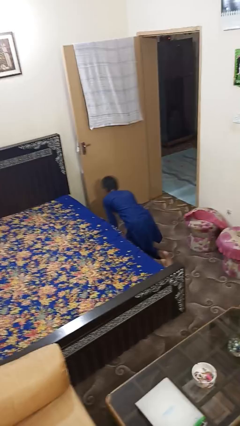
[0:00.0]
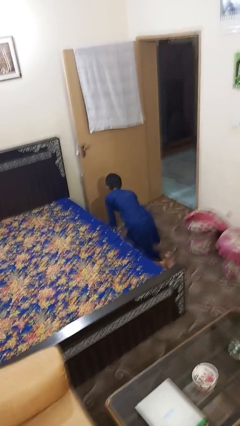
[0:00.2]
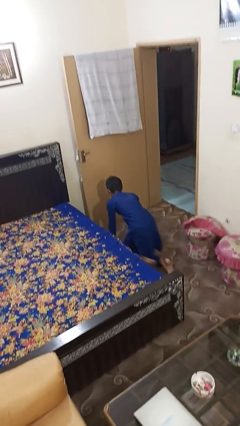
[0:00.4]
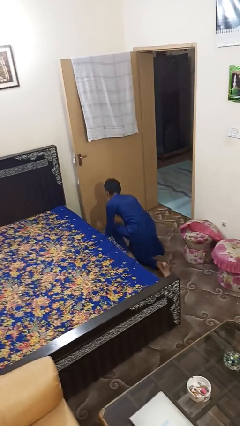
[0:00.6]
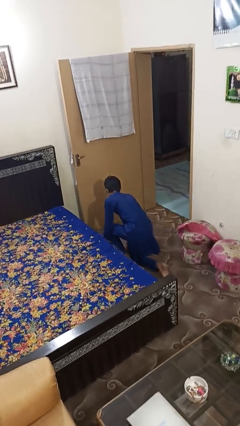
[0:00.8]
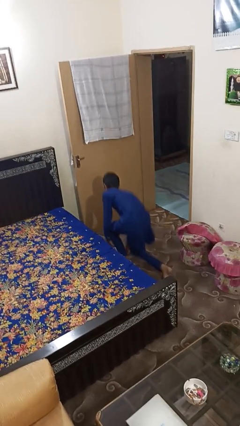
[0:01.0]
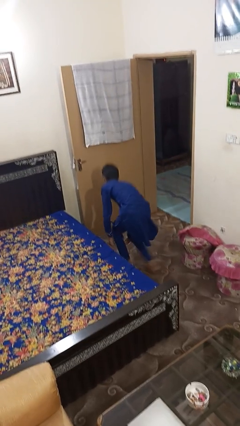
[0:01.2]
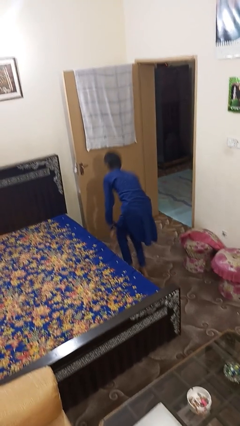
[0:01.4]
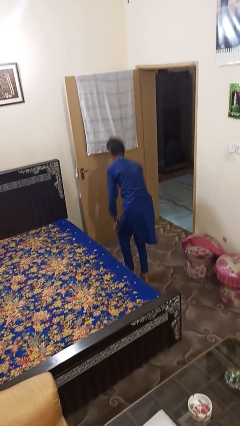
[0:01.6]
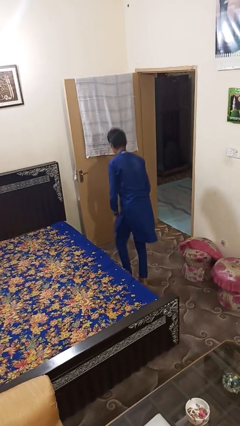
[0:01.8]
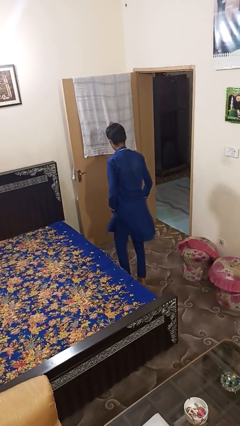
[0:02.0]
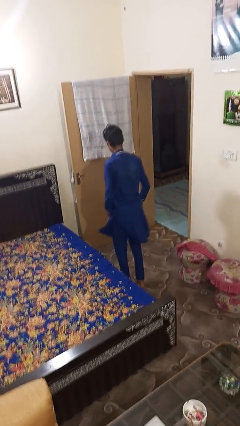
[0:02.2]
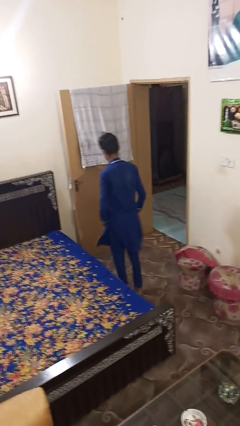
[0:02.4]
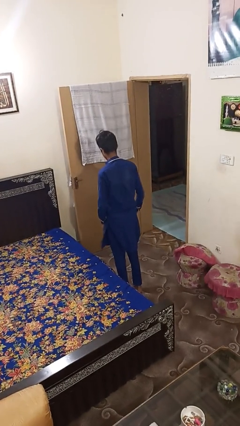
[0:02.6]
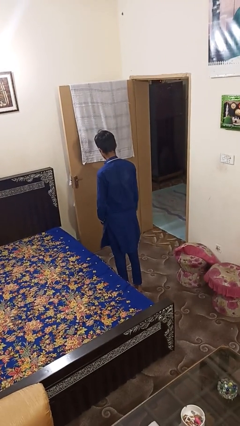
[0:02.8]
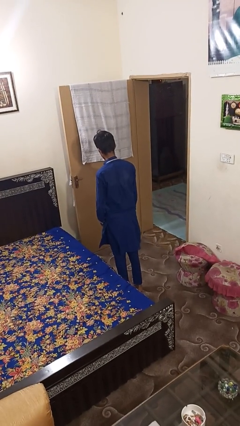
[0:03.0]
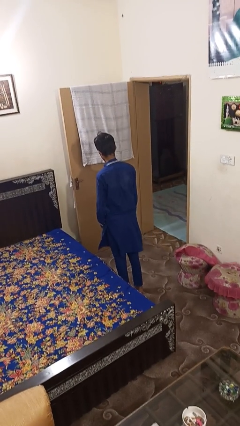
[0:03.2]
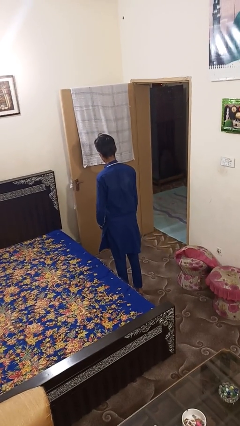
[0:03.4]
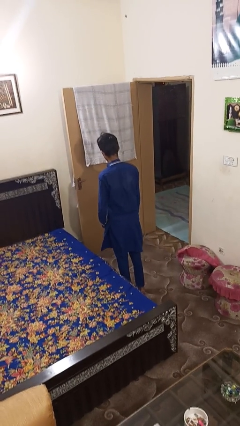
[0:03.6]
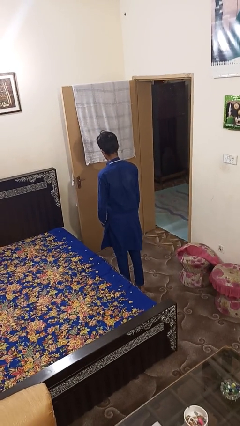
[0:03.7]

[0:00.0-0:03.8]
person stands up from floor

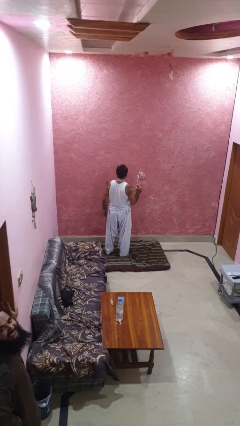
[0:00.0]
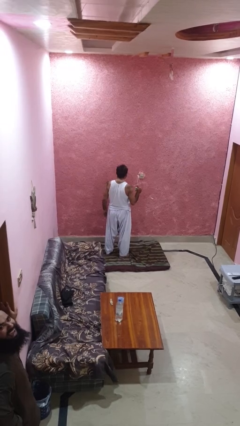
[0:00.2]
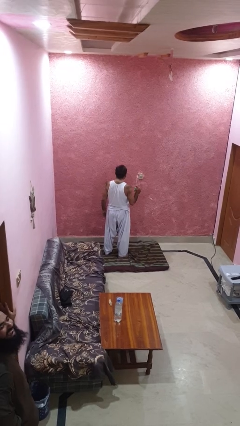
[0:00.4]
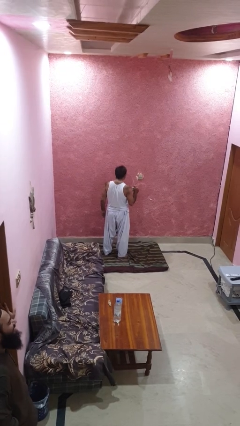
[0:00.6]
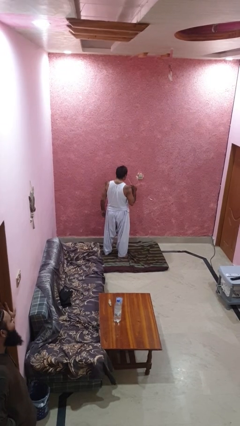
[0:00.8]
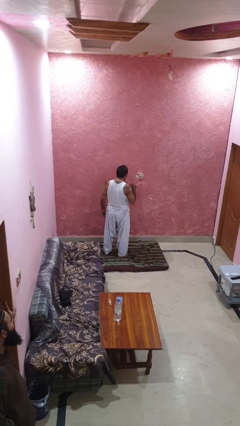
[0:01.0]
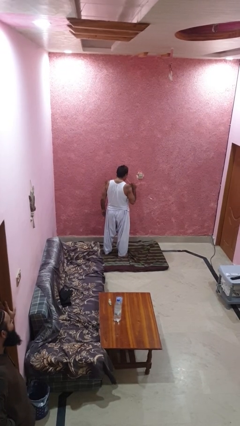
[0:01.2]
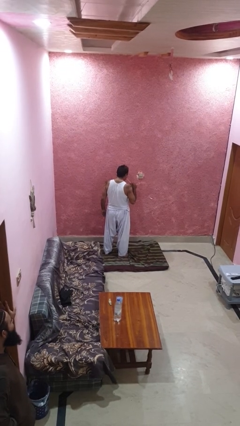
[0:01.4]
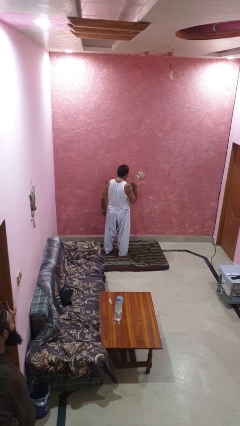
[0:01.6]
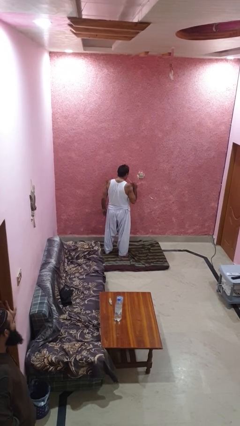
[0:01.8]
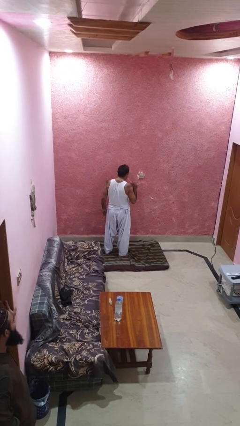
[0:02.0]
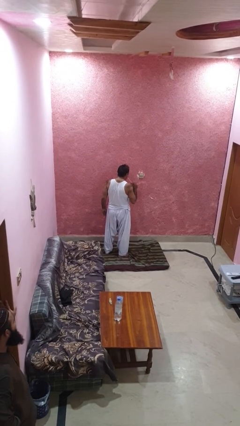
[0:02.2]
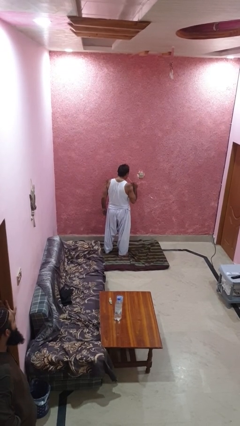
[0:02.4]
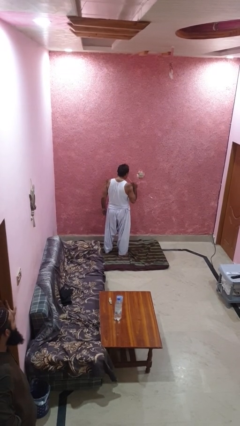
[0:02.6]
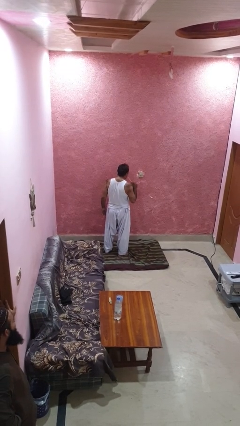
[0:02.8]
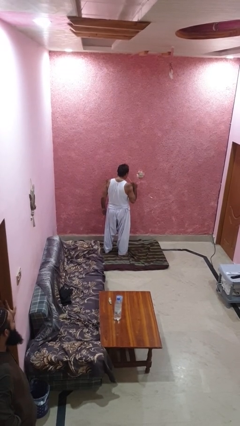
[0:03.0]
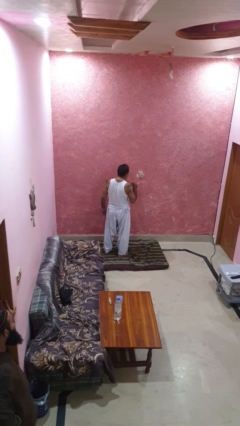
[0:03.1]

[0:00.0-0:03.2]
person drinks from straw

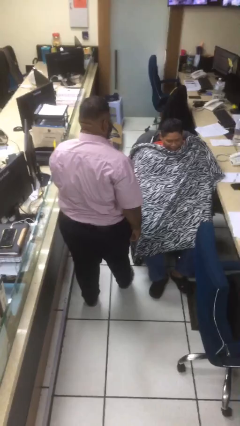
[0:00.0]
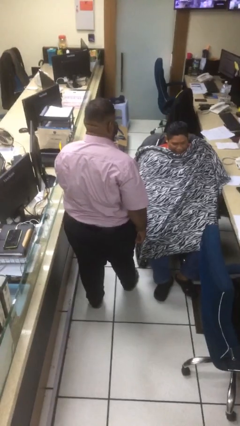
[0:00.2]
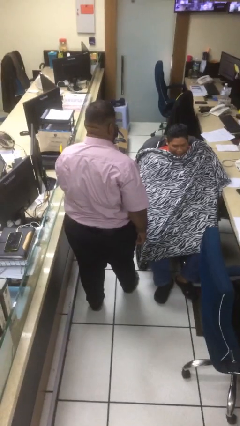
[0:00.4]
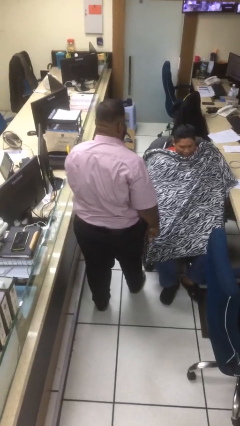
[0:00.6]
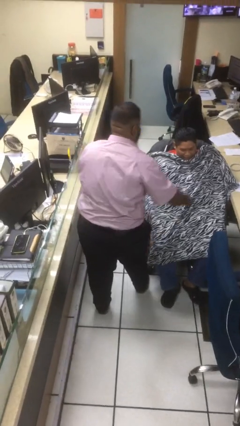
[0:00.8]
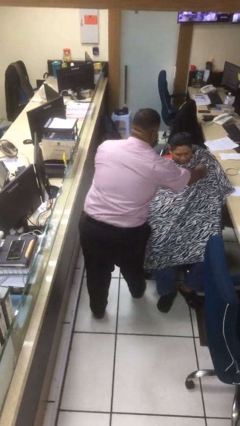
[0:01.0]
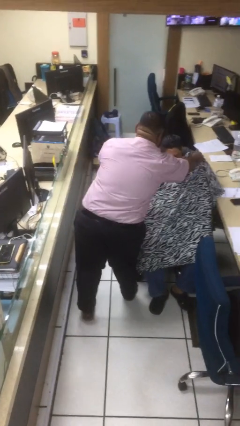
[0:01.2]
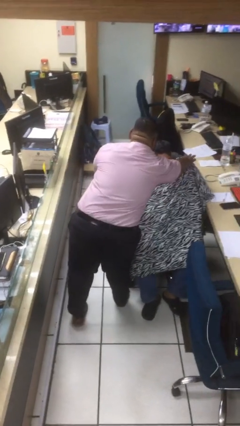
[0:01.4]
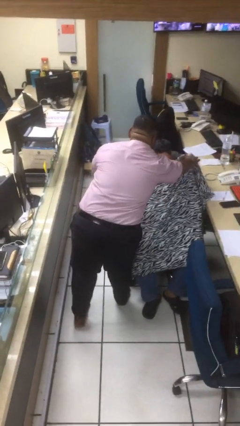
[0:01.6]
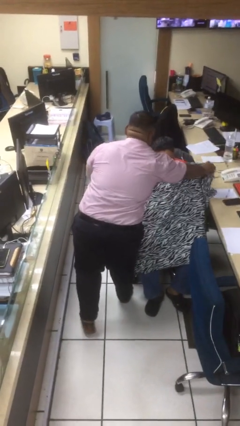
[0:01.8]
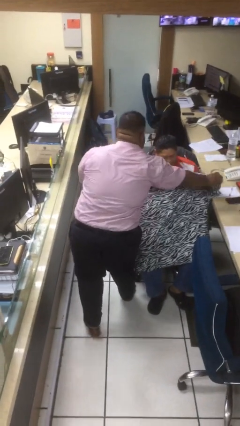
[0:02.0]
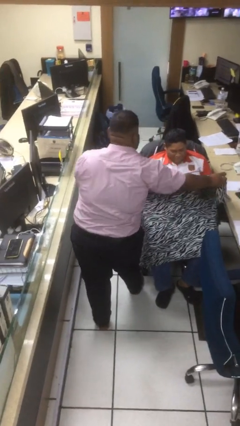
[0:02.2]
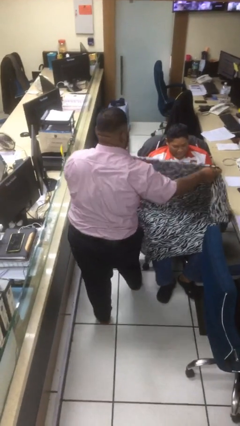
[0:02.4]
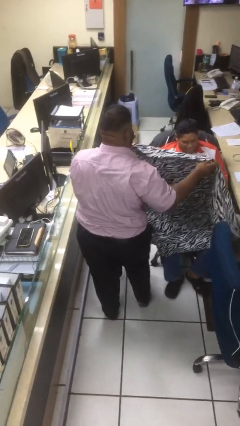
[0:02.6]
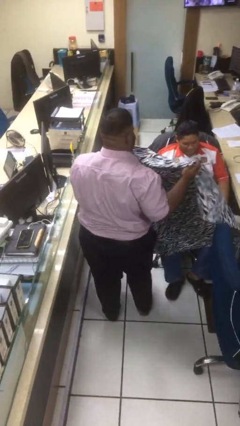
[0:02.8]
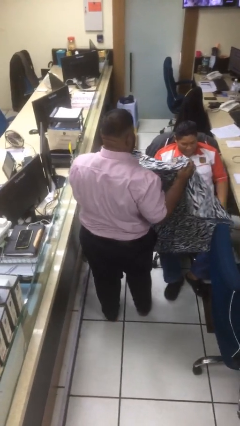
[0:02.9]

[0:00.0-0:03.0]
person uncovers friend with blanket

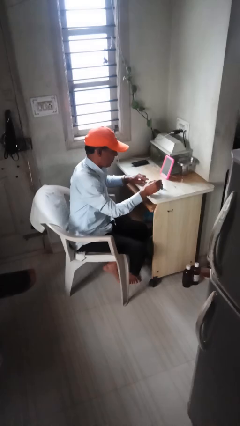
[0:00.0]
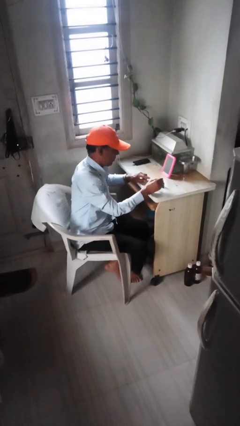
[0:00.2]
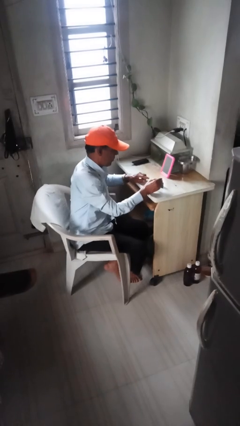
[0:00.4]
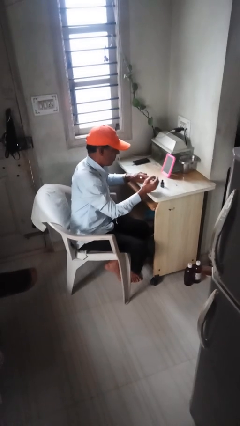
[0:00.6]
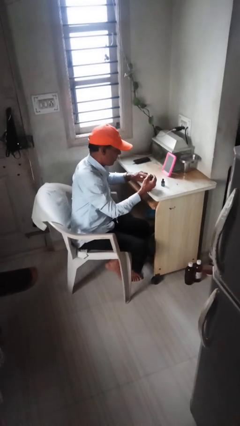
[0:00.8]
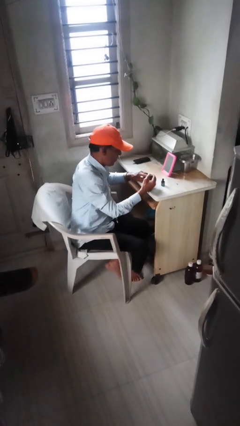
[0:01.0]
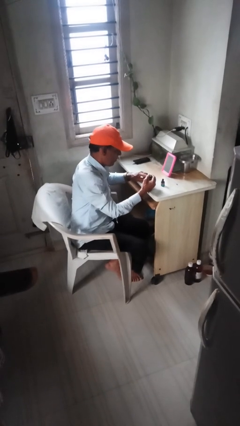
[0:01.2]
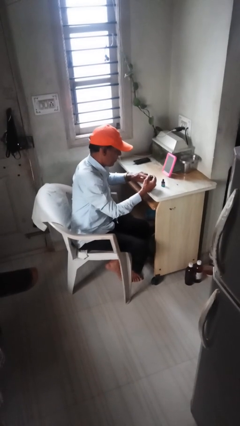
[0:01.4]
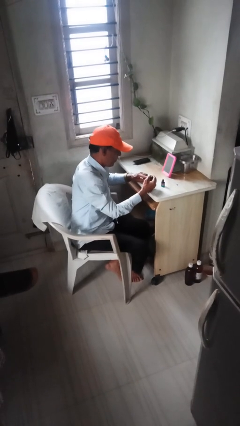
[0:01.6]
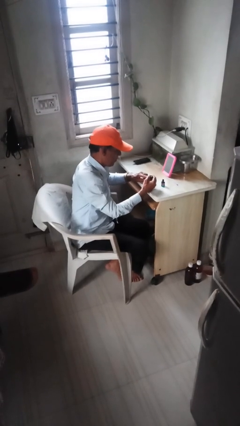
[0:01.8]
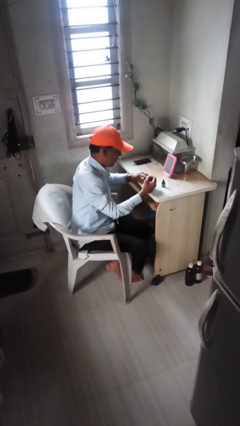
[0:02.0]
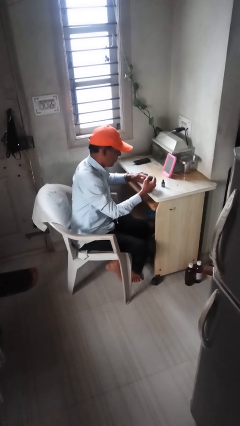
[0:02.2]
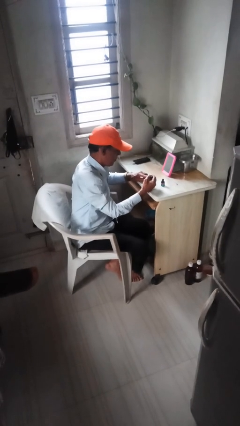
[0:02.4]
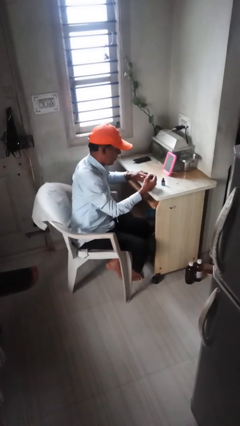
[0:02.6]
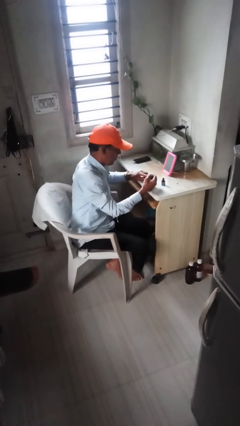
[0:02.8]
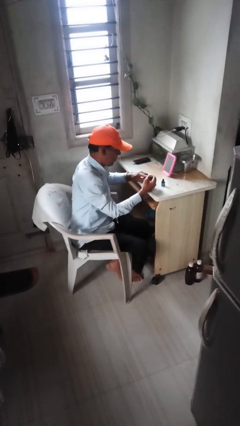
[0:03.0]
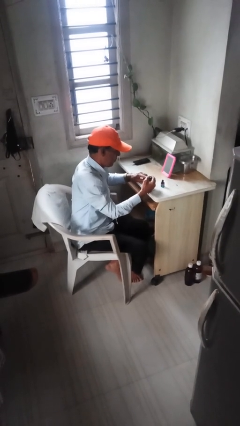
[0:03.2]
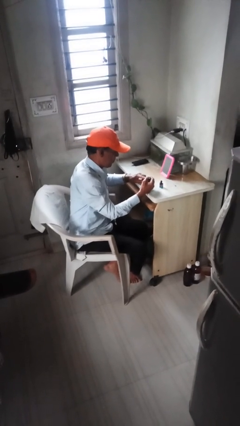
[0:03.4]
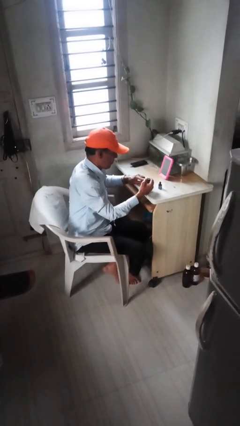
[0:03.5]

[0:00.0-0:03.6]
person paints fingernails

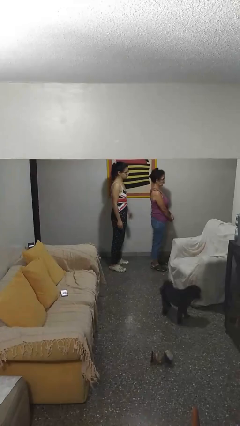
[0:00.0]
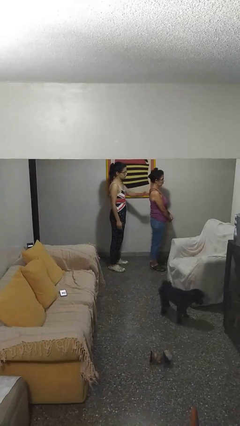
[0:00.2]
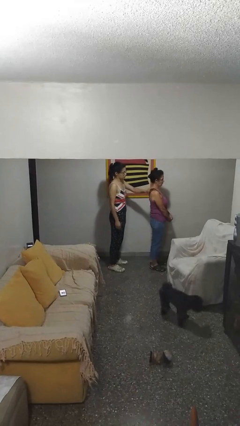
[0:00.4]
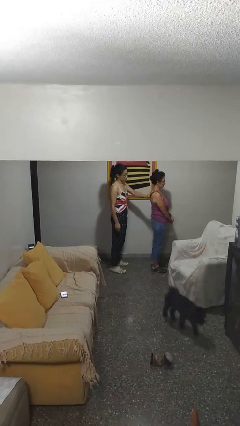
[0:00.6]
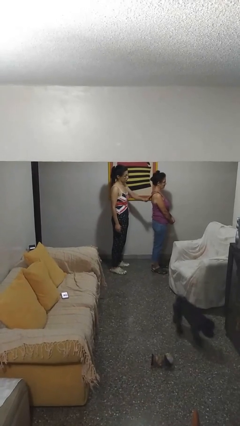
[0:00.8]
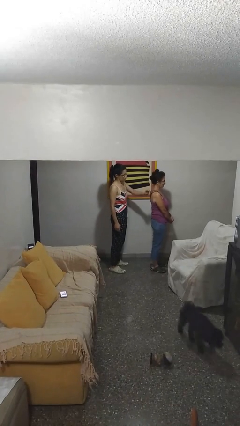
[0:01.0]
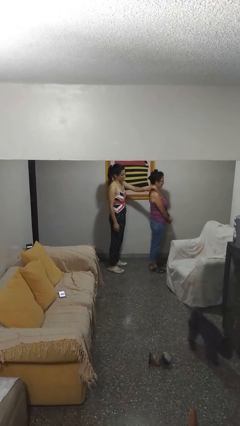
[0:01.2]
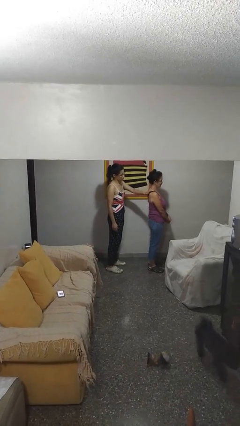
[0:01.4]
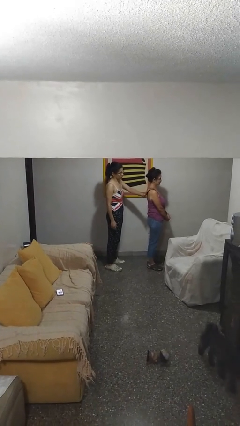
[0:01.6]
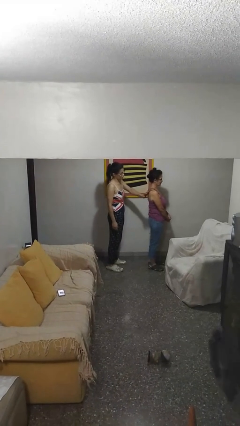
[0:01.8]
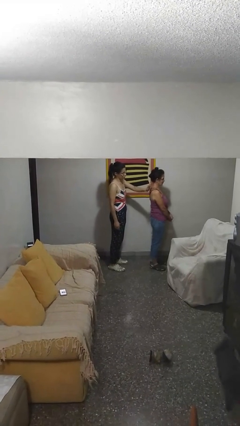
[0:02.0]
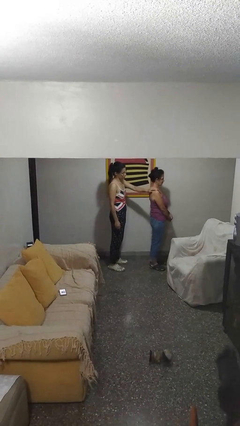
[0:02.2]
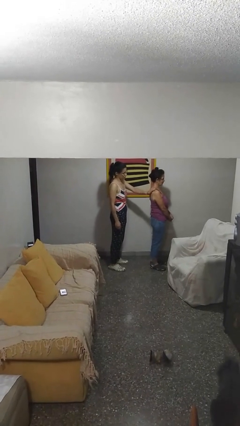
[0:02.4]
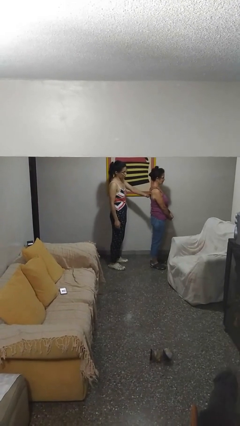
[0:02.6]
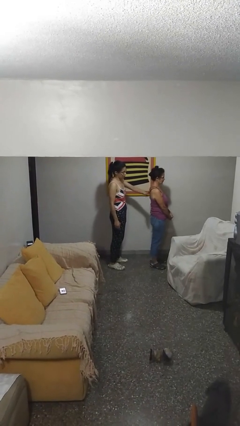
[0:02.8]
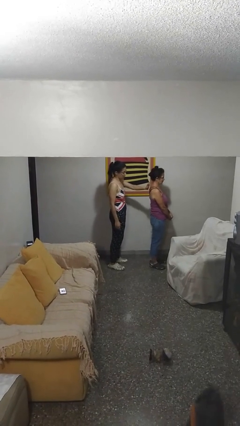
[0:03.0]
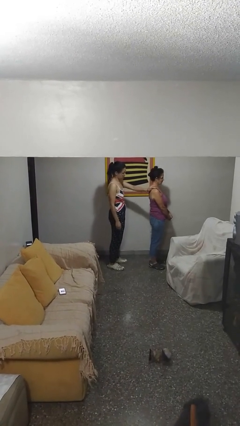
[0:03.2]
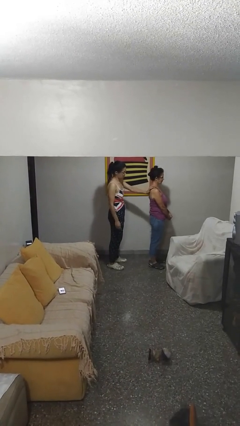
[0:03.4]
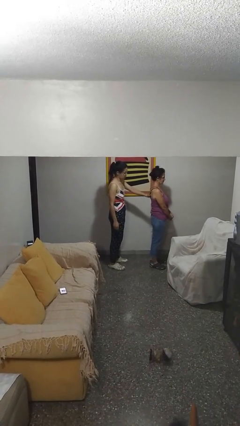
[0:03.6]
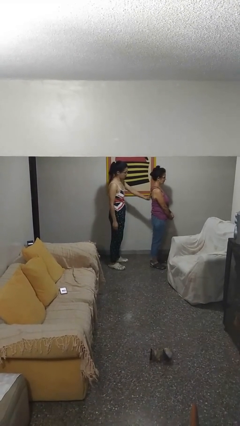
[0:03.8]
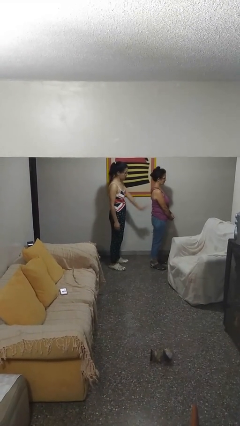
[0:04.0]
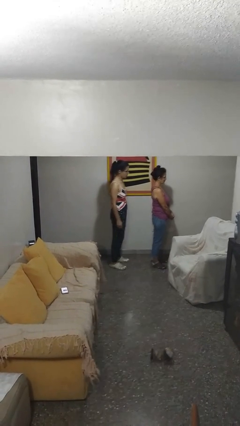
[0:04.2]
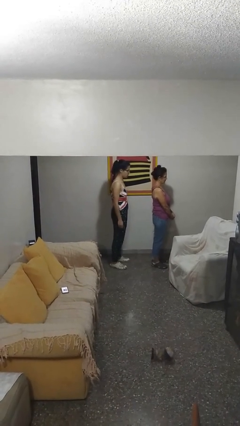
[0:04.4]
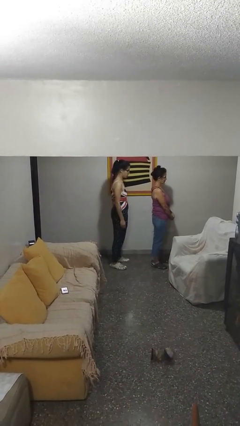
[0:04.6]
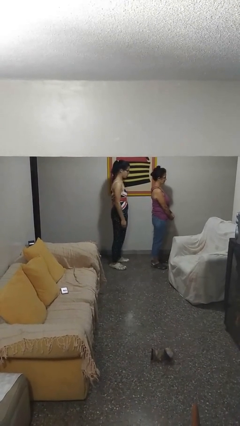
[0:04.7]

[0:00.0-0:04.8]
person touches back of person
